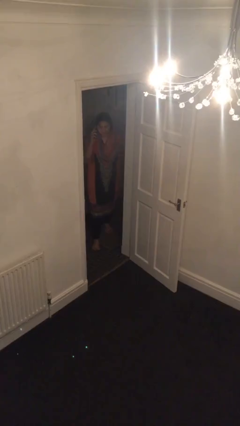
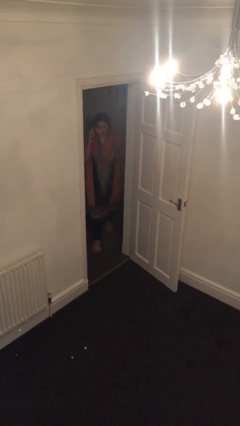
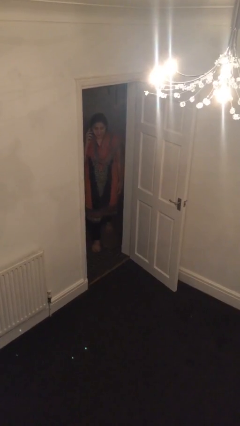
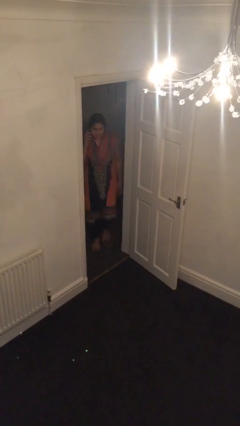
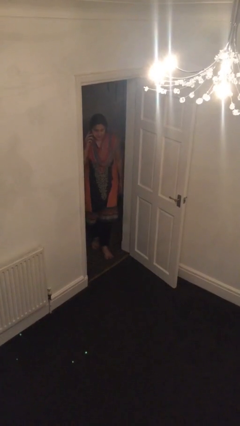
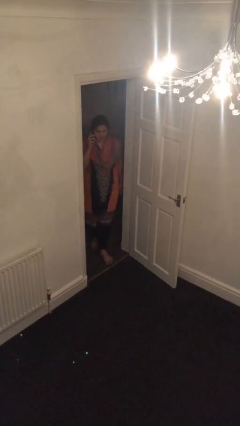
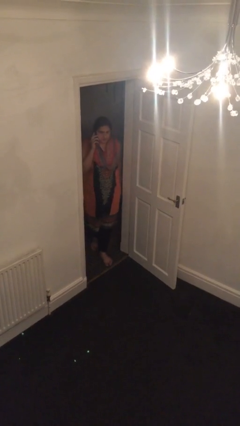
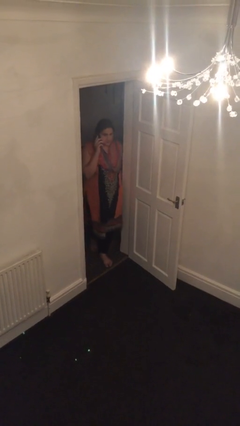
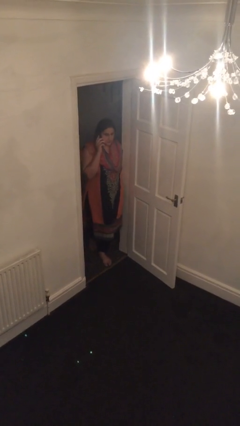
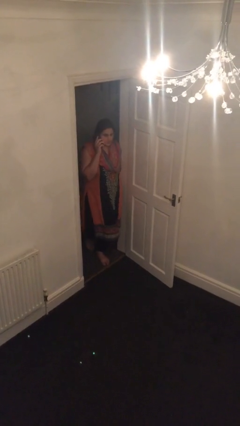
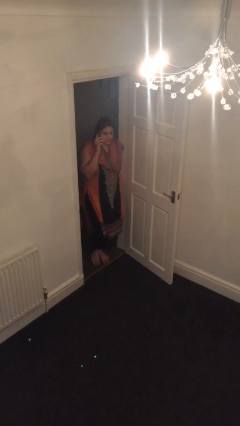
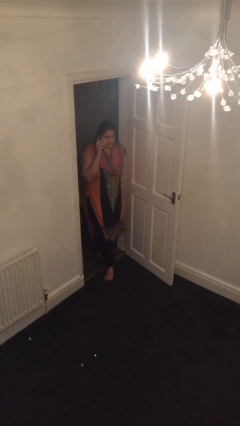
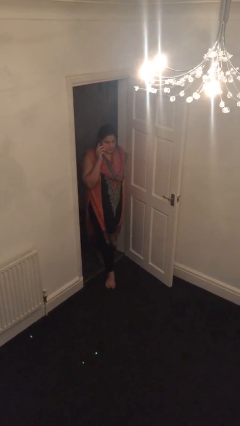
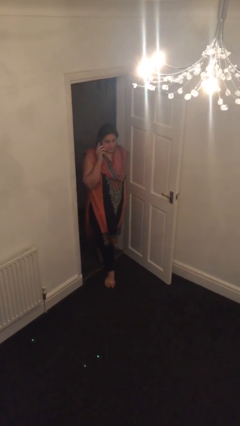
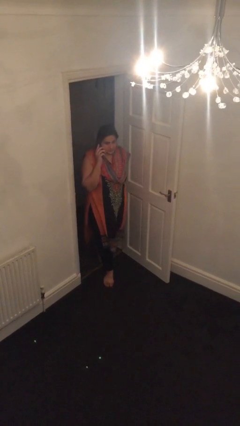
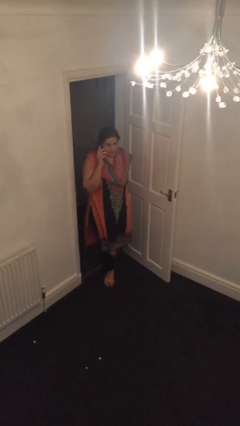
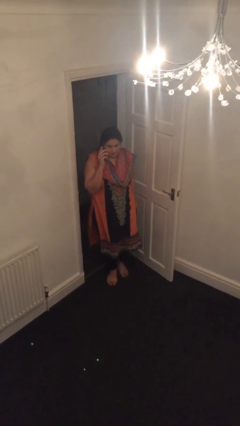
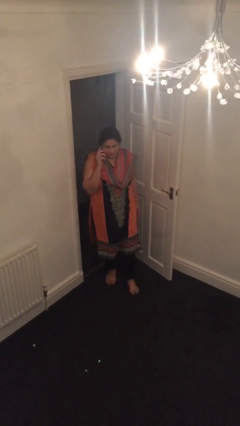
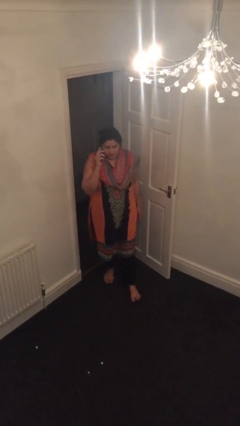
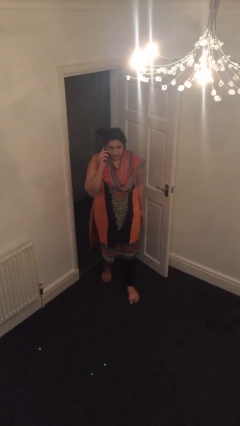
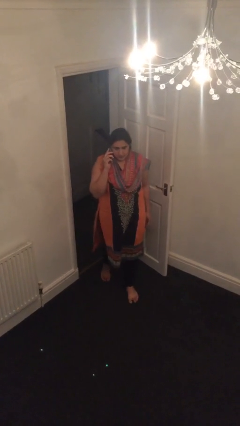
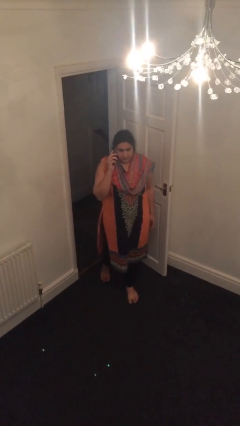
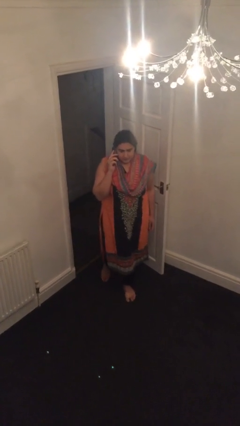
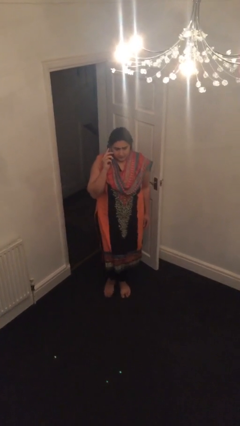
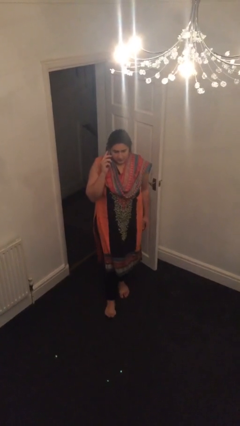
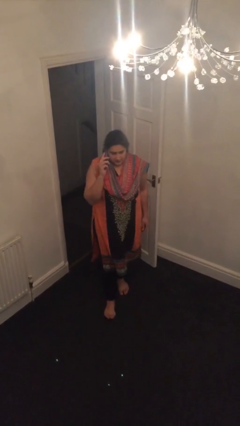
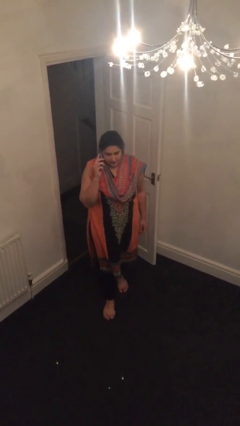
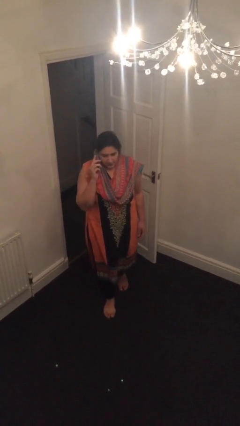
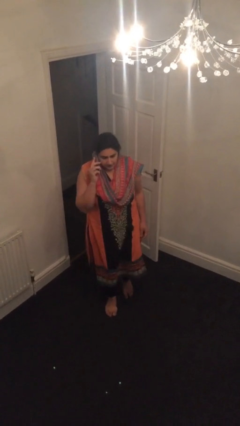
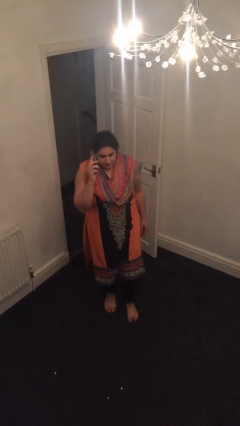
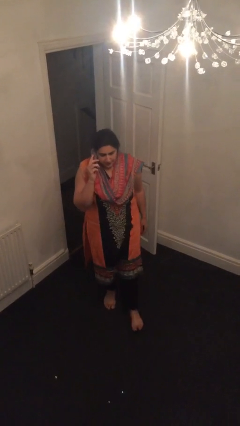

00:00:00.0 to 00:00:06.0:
person enters scene through structure

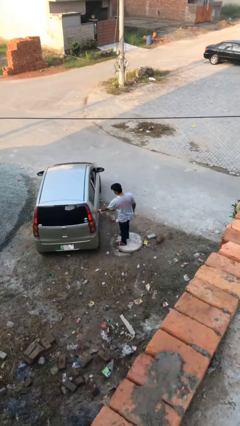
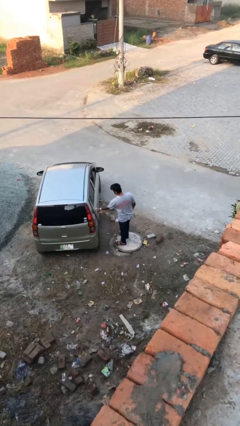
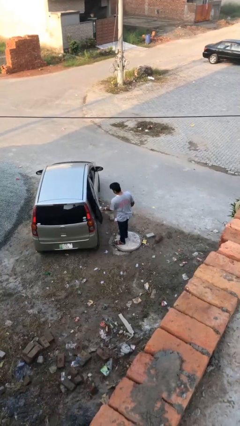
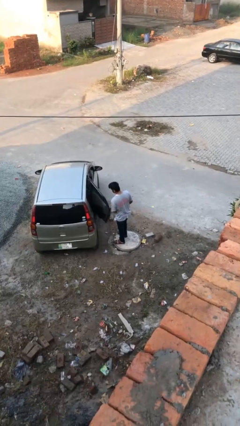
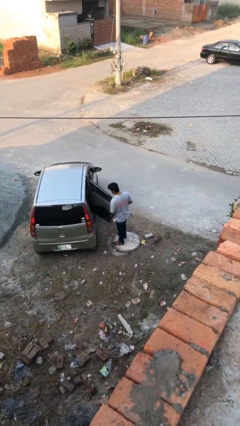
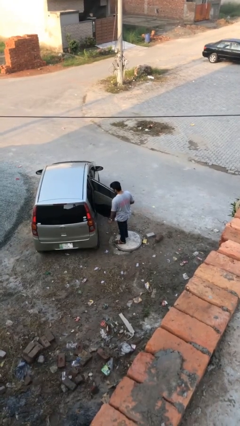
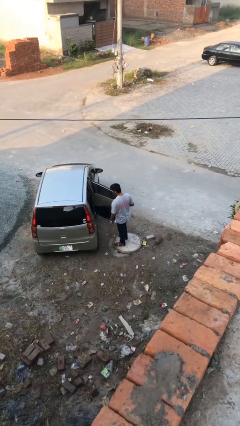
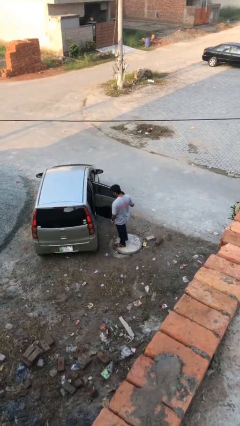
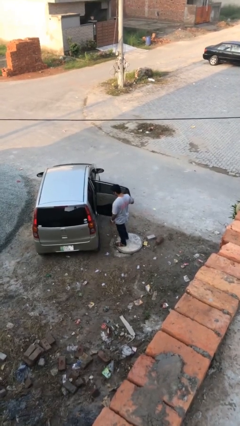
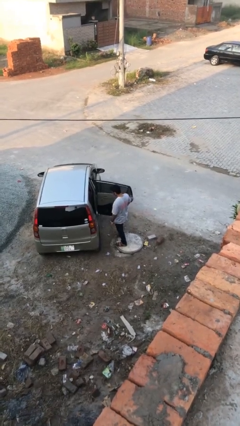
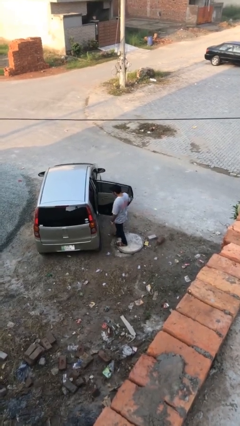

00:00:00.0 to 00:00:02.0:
person opens car door

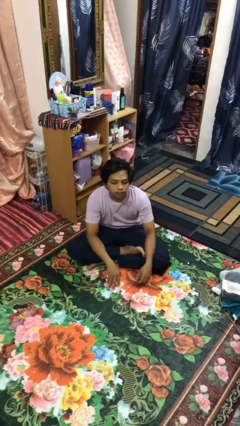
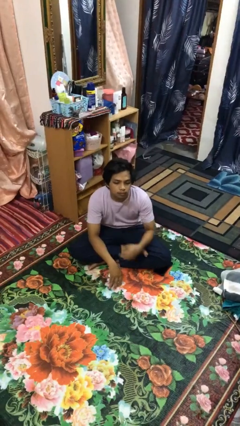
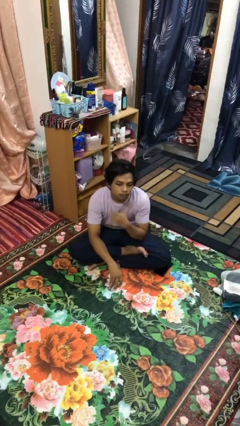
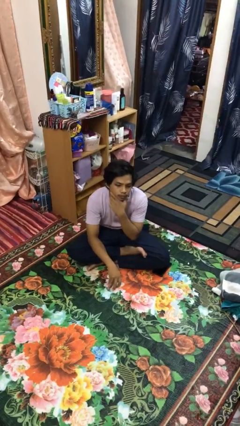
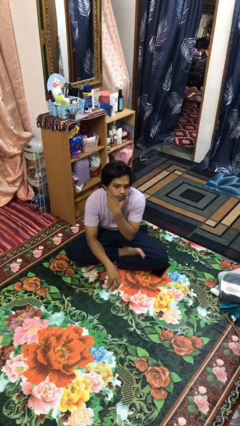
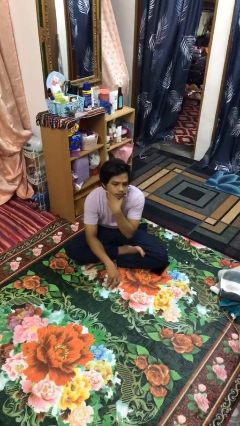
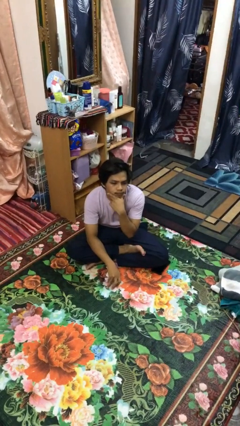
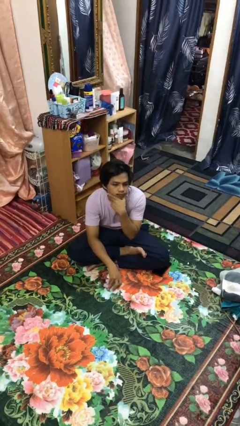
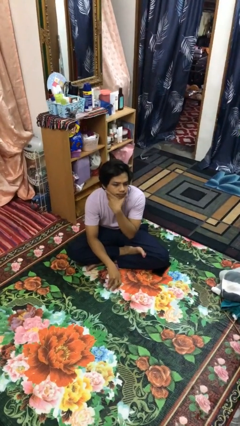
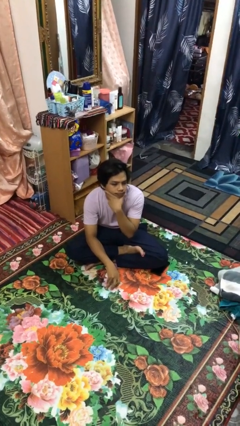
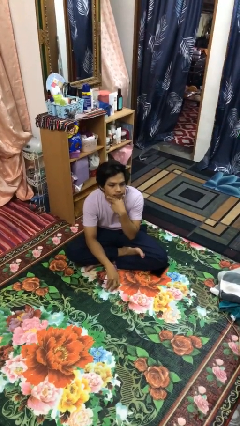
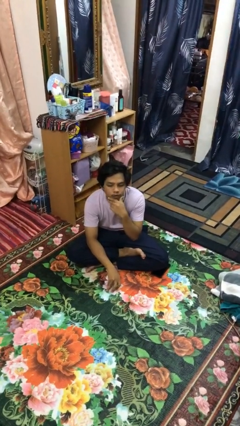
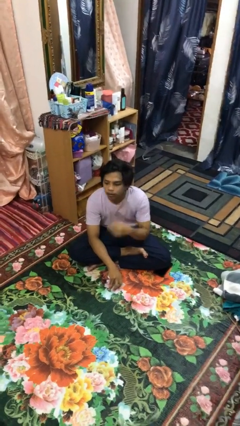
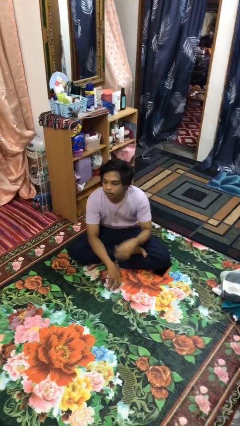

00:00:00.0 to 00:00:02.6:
person strokes chin

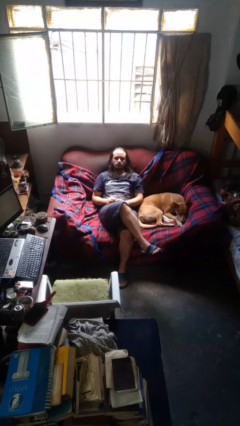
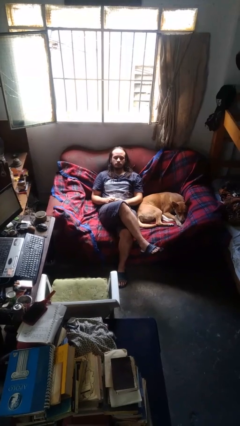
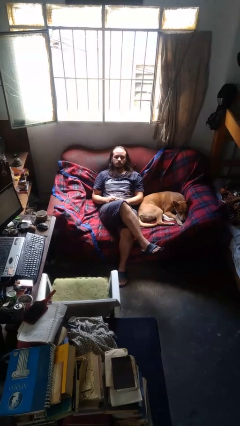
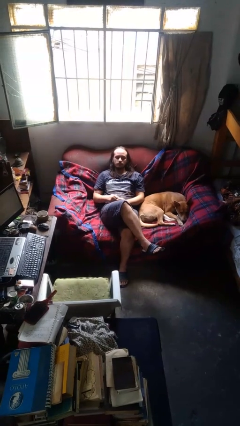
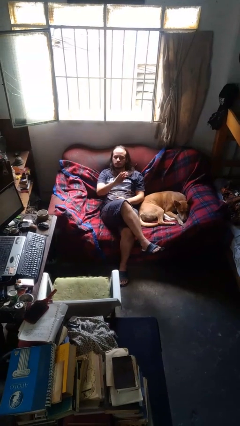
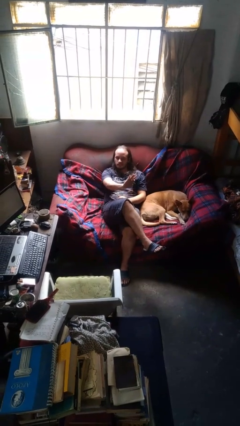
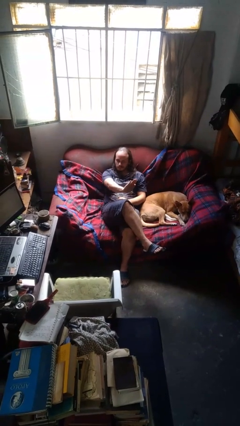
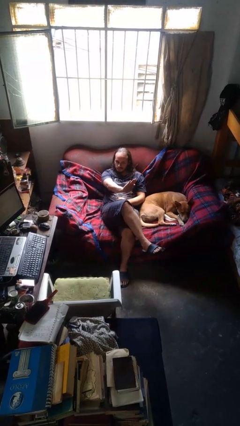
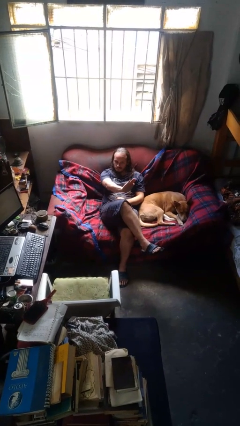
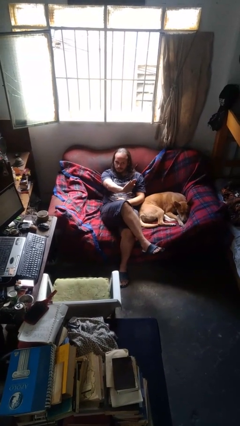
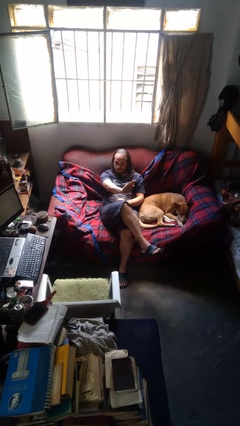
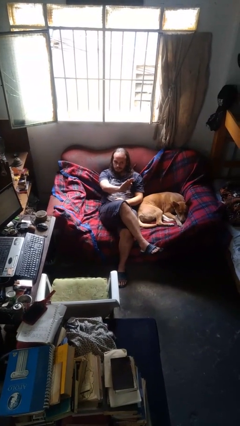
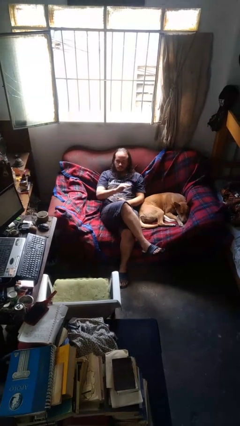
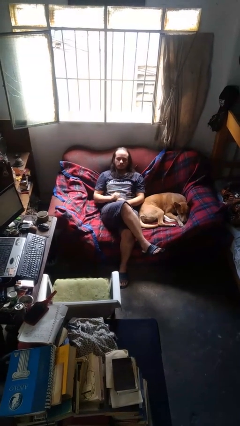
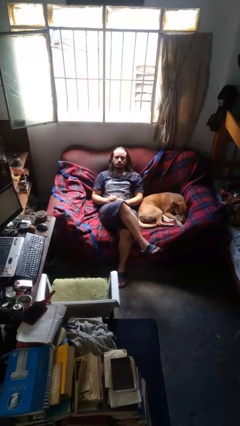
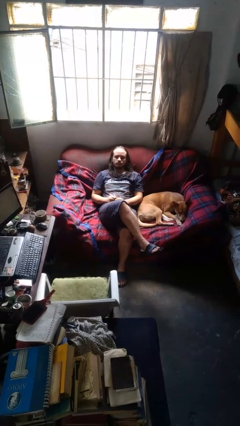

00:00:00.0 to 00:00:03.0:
person gestures stop

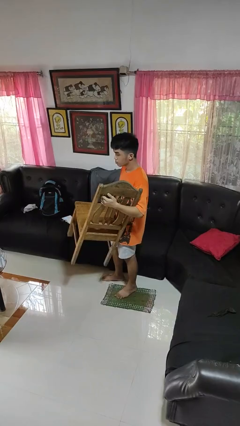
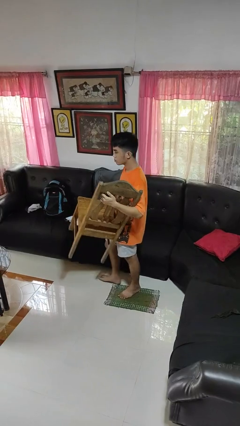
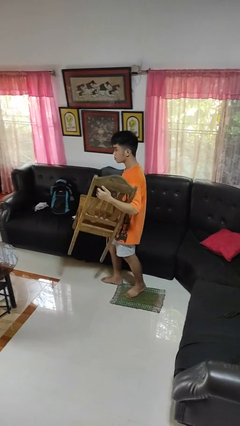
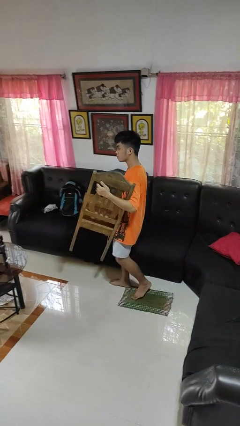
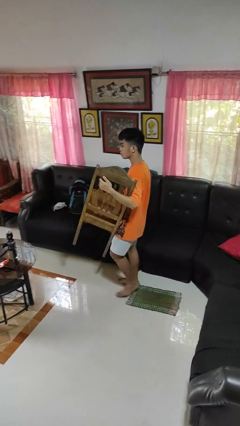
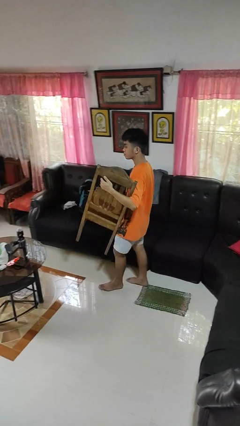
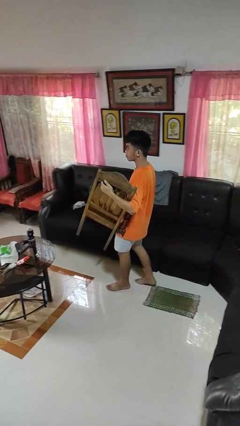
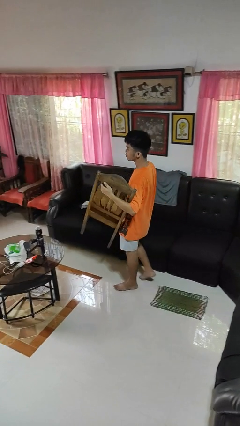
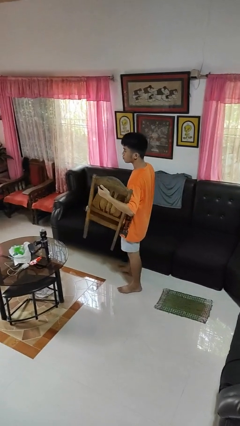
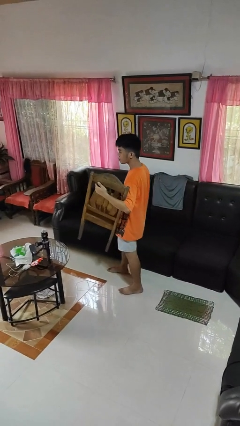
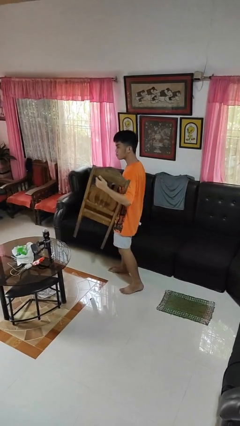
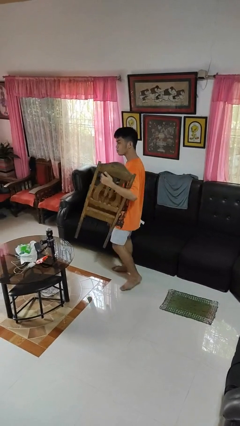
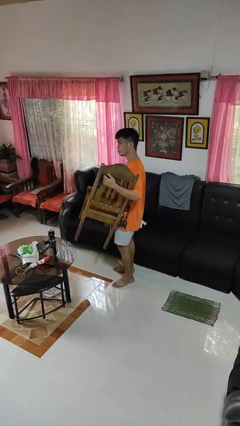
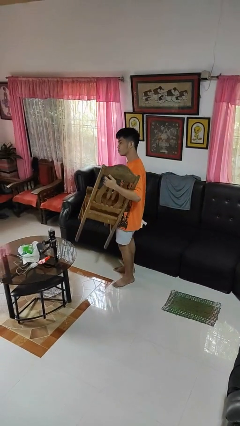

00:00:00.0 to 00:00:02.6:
person carries furniture

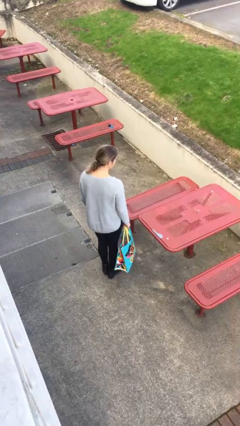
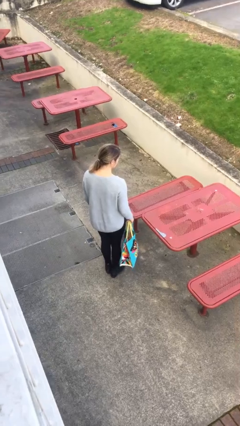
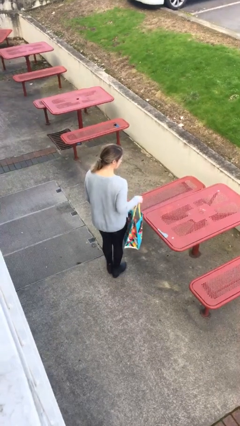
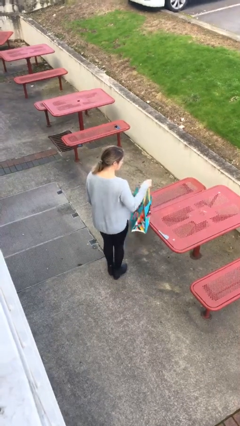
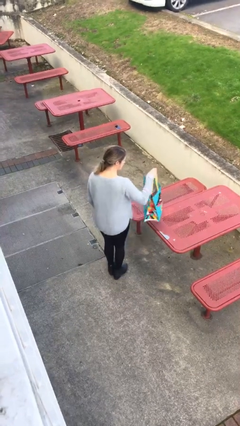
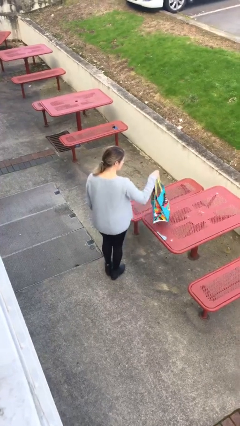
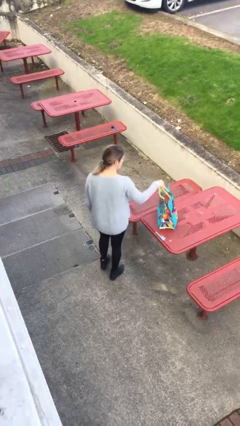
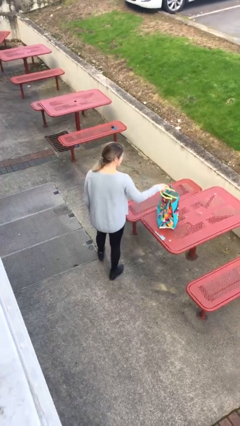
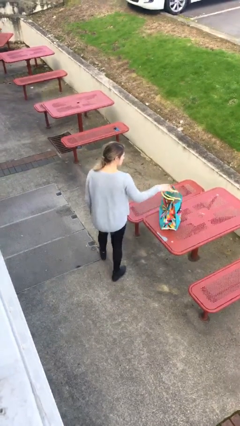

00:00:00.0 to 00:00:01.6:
person puts down object on table
